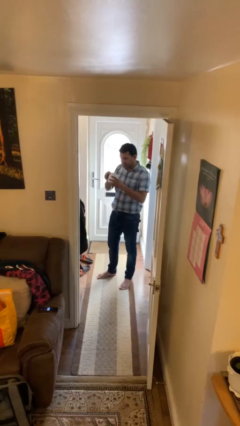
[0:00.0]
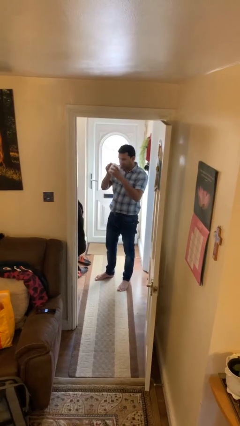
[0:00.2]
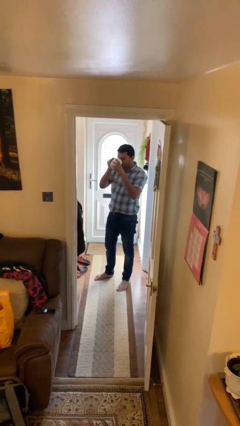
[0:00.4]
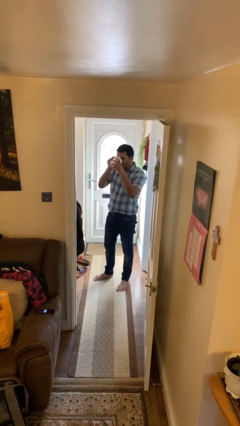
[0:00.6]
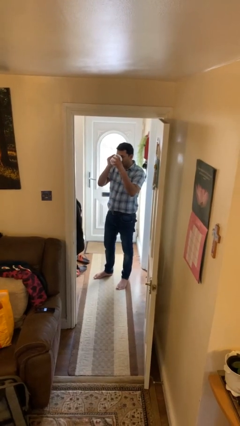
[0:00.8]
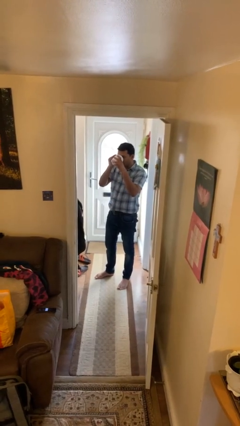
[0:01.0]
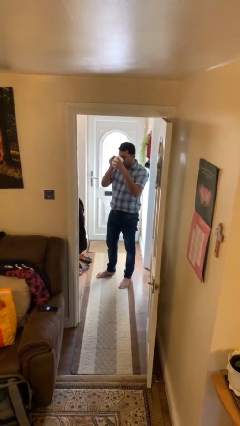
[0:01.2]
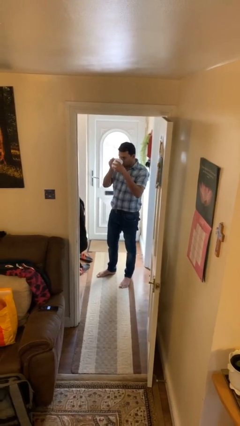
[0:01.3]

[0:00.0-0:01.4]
person drinks from mug

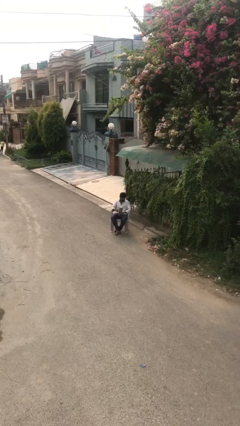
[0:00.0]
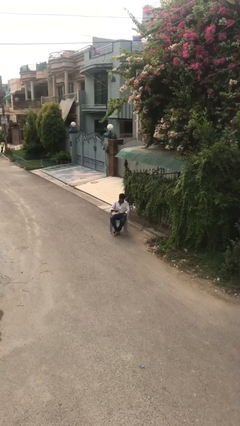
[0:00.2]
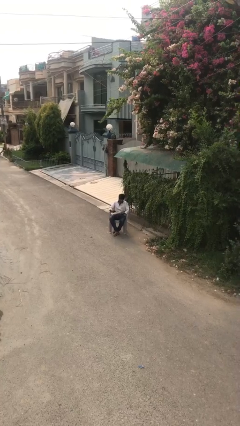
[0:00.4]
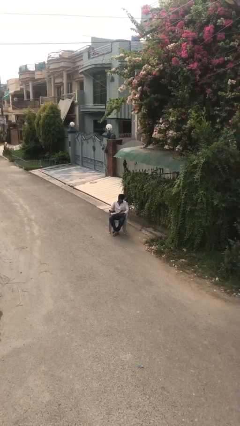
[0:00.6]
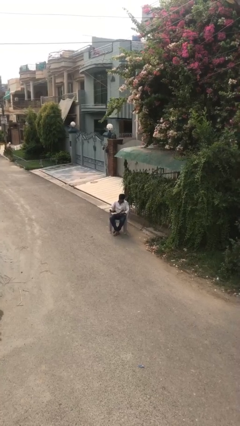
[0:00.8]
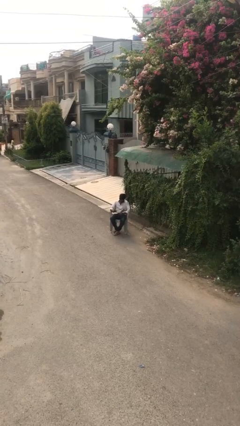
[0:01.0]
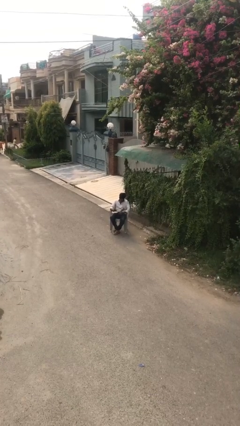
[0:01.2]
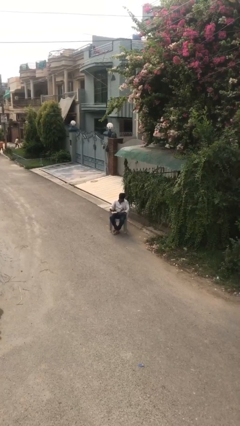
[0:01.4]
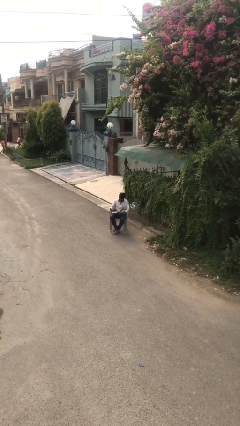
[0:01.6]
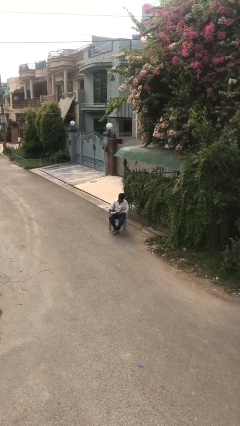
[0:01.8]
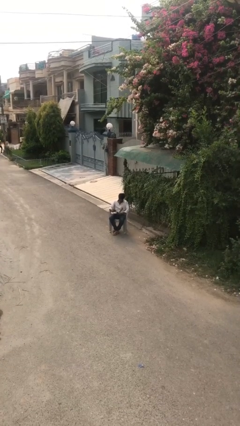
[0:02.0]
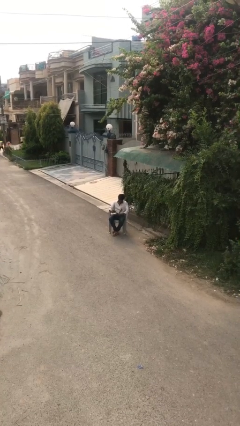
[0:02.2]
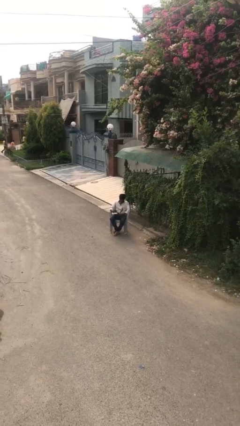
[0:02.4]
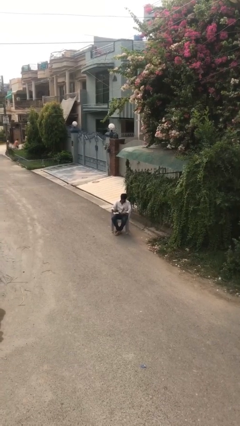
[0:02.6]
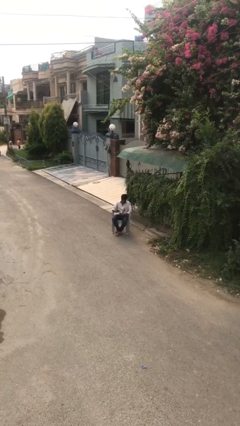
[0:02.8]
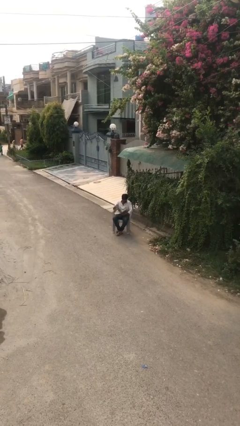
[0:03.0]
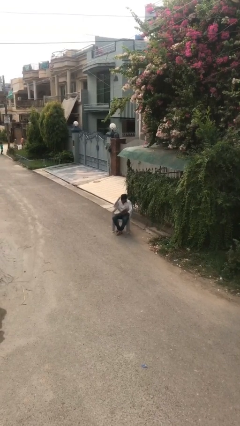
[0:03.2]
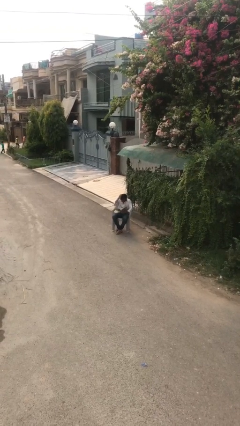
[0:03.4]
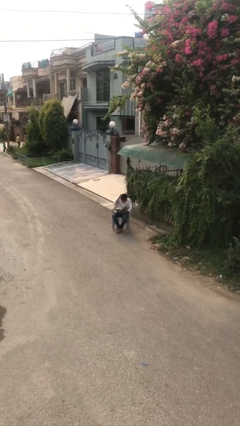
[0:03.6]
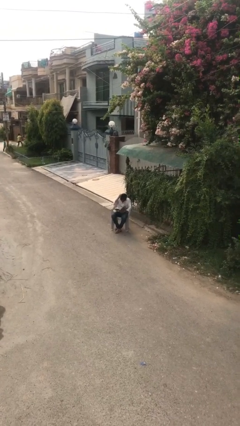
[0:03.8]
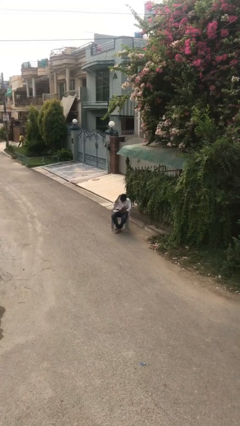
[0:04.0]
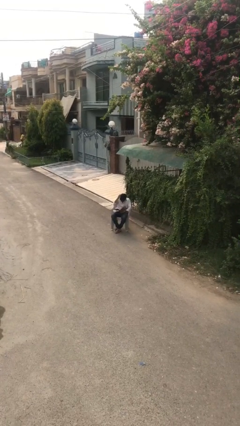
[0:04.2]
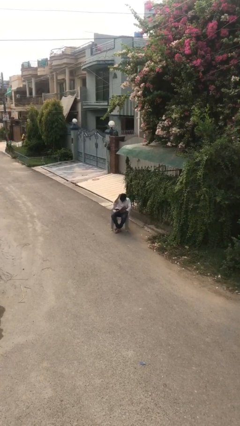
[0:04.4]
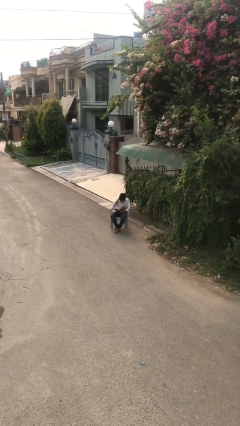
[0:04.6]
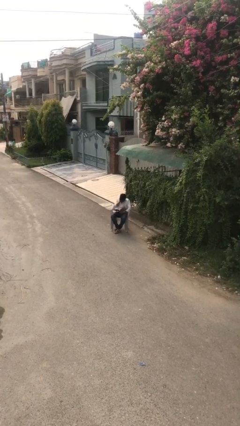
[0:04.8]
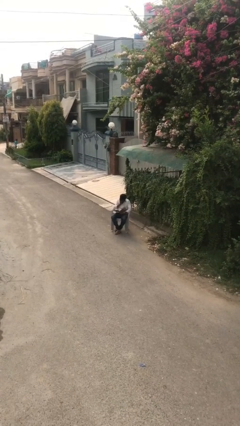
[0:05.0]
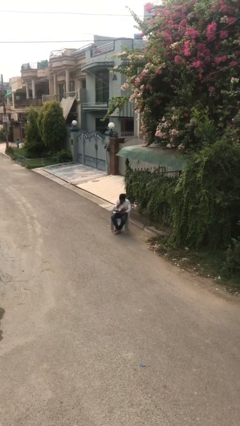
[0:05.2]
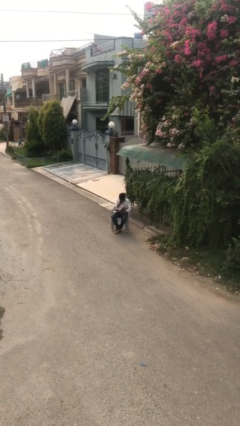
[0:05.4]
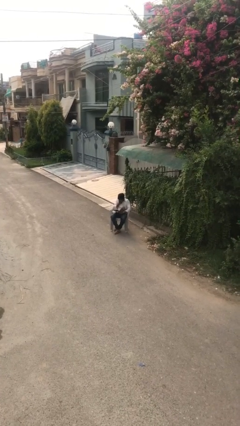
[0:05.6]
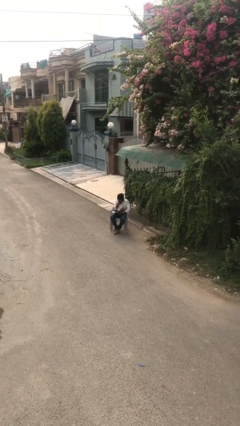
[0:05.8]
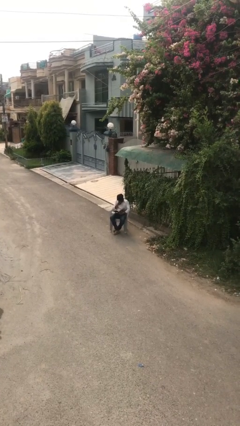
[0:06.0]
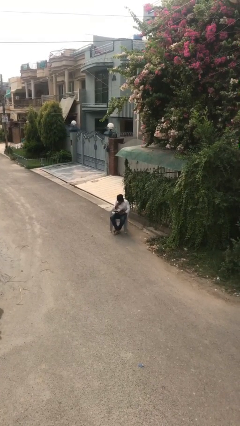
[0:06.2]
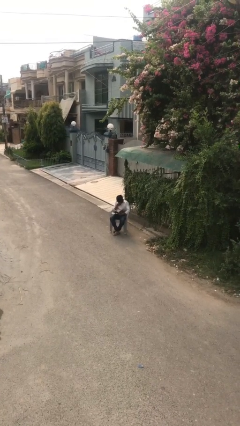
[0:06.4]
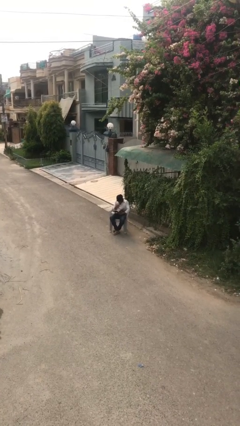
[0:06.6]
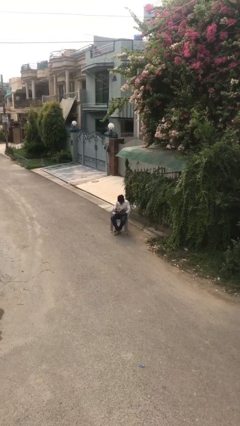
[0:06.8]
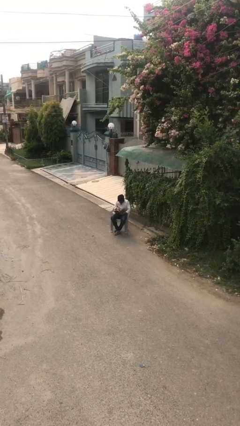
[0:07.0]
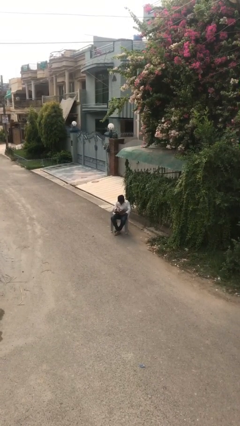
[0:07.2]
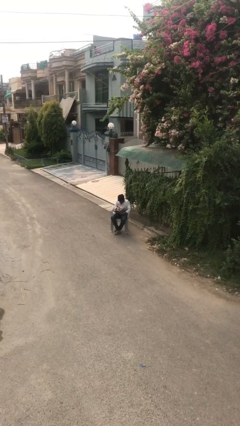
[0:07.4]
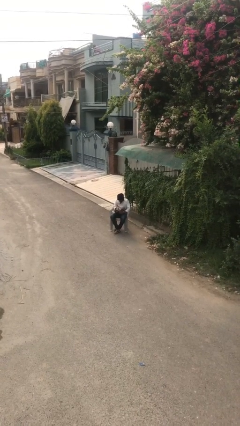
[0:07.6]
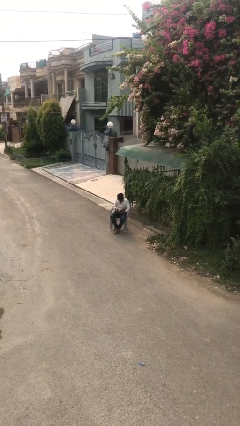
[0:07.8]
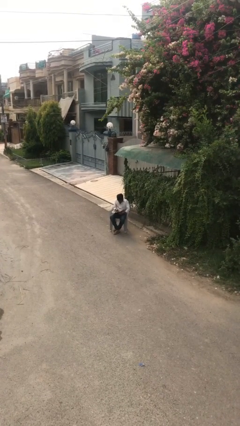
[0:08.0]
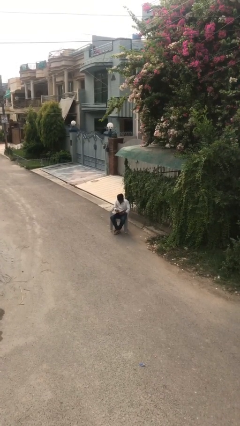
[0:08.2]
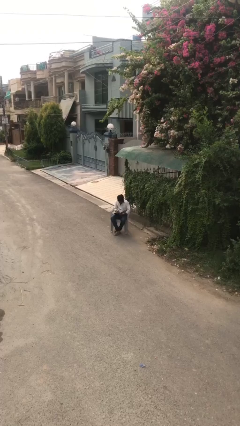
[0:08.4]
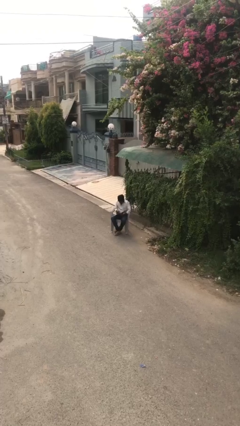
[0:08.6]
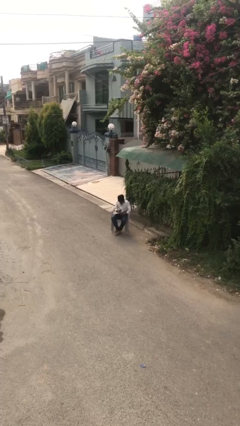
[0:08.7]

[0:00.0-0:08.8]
person reads document

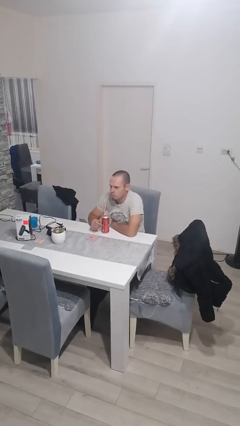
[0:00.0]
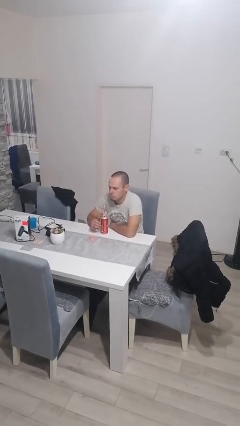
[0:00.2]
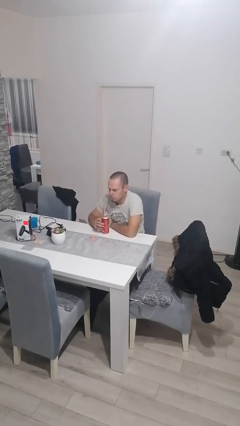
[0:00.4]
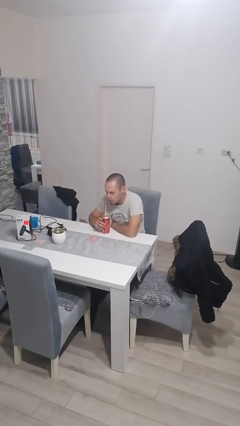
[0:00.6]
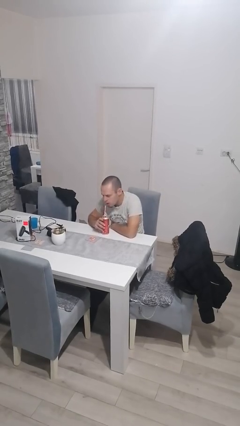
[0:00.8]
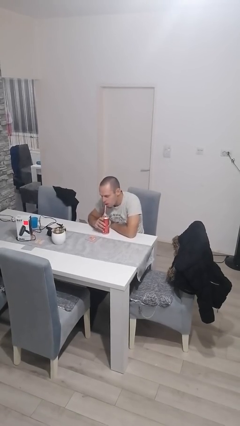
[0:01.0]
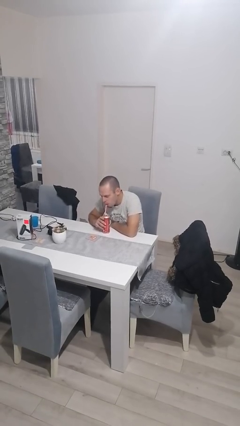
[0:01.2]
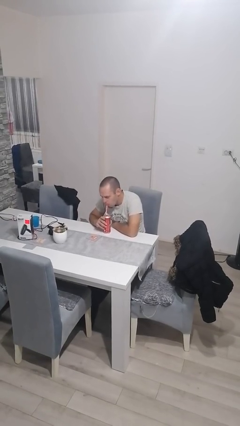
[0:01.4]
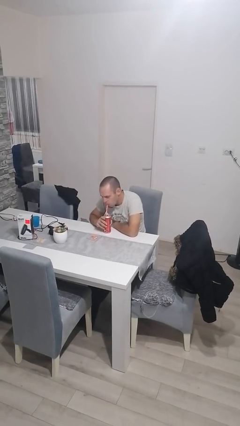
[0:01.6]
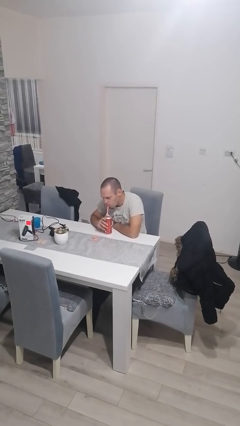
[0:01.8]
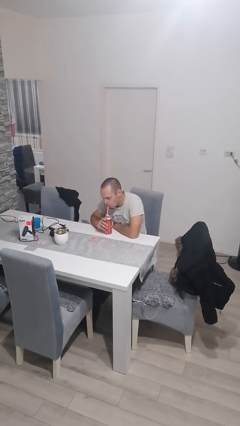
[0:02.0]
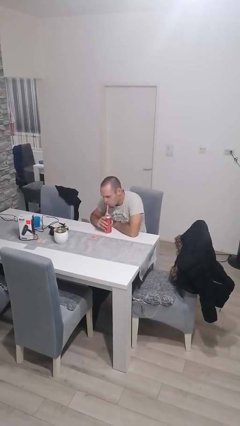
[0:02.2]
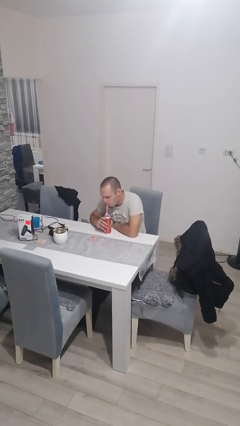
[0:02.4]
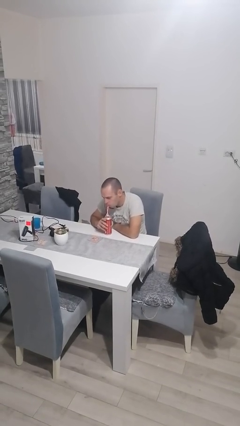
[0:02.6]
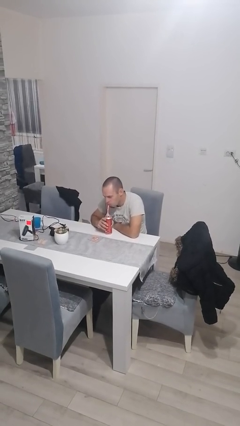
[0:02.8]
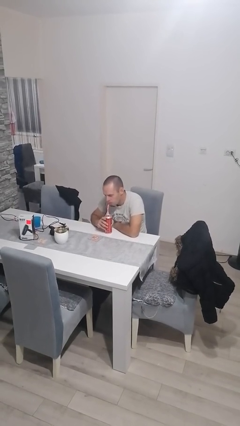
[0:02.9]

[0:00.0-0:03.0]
person drinks from straw

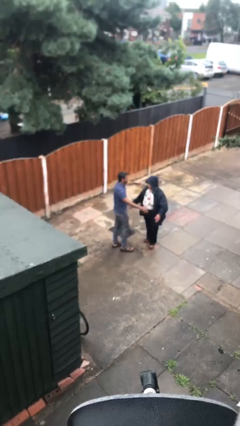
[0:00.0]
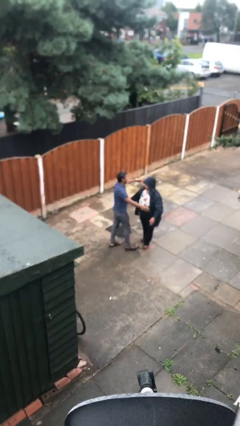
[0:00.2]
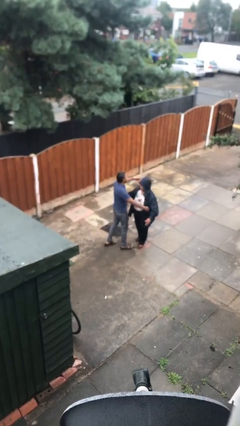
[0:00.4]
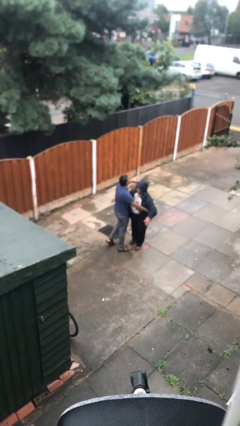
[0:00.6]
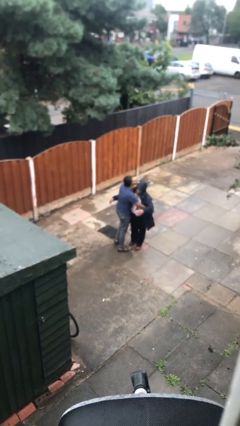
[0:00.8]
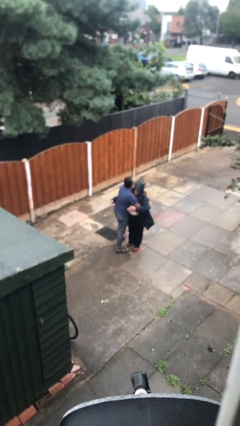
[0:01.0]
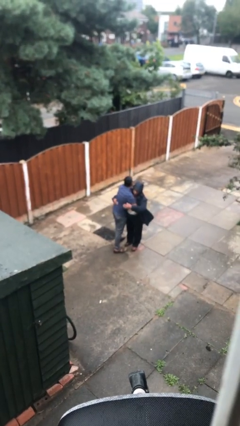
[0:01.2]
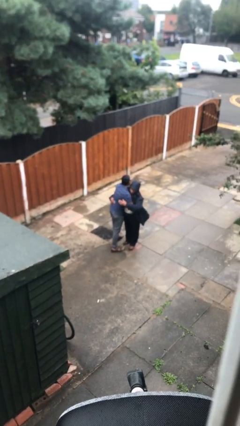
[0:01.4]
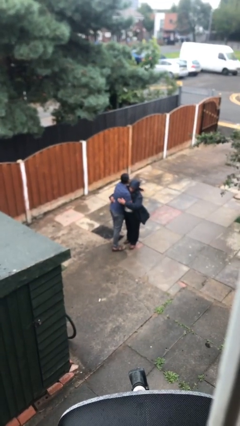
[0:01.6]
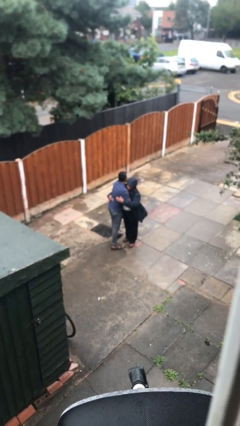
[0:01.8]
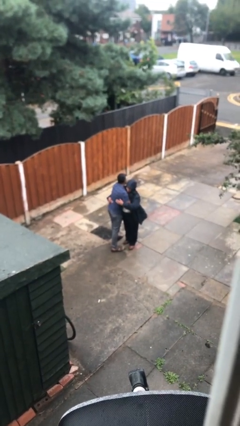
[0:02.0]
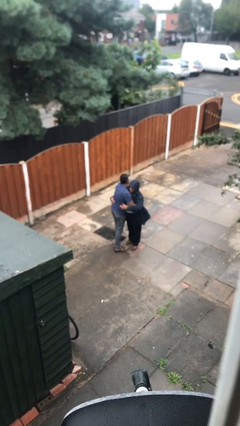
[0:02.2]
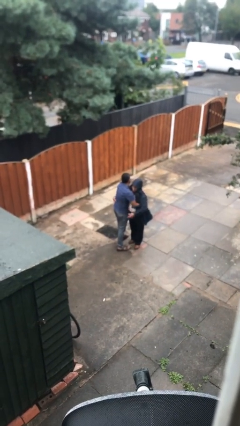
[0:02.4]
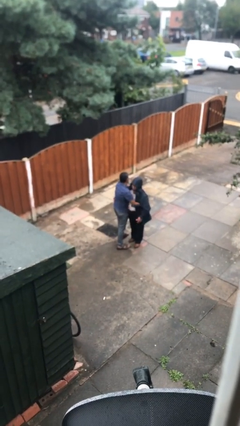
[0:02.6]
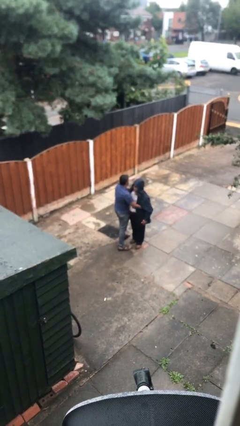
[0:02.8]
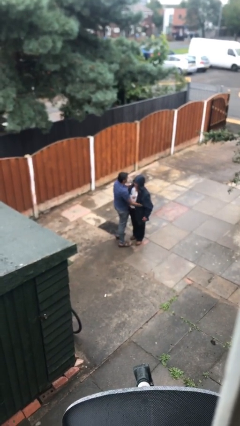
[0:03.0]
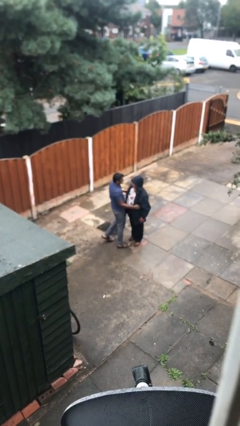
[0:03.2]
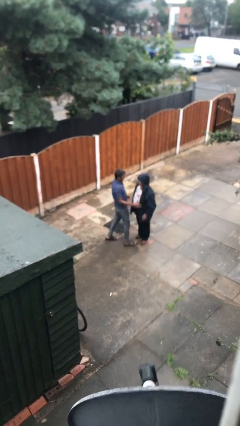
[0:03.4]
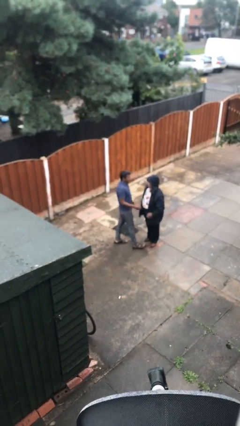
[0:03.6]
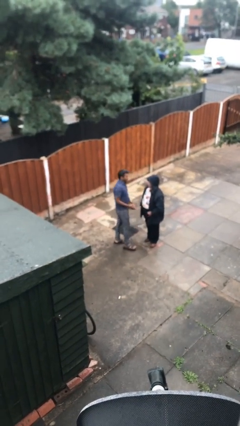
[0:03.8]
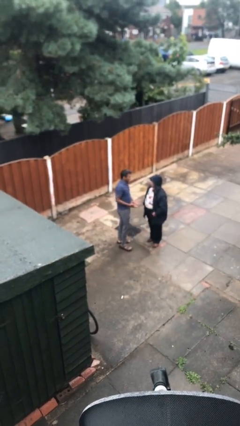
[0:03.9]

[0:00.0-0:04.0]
person embraces person
